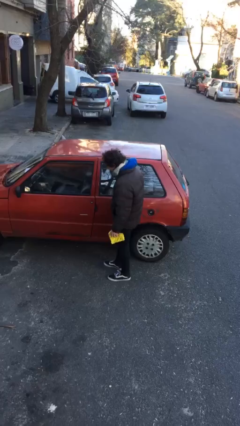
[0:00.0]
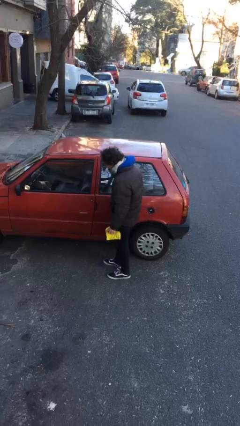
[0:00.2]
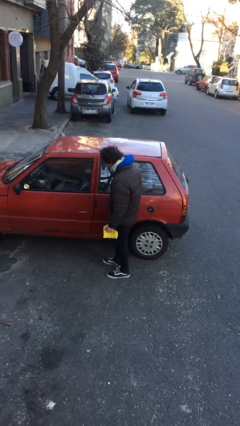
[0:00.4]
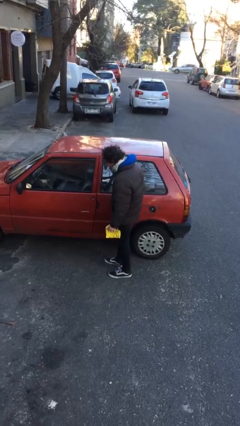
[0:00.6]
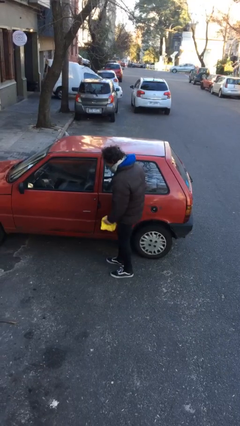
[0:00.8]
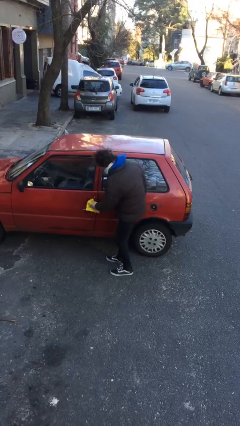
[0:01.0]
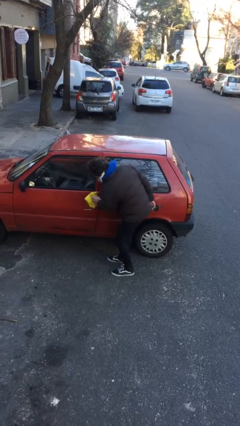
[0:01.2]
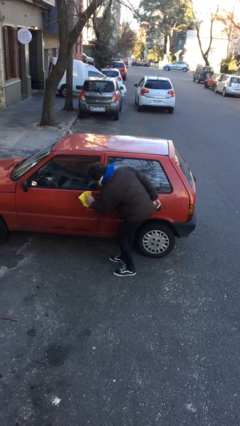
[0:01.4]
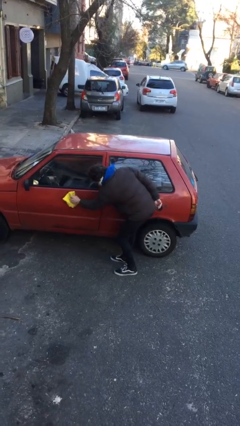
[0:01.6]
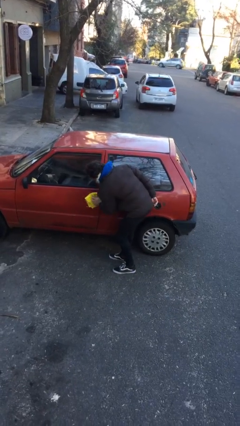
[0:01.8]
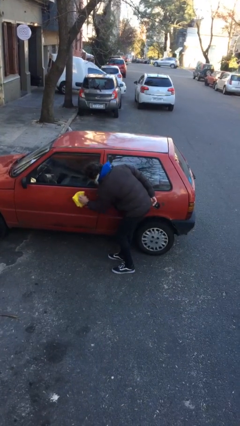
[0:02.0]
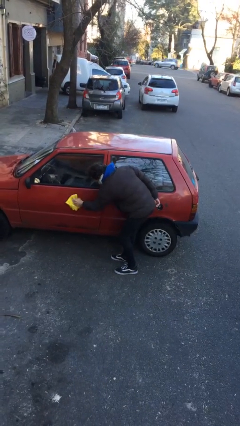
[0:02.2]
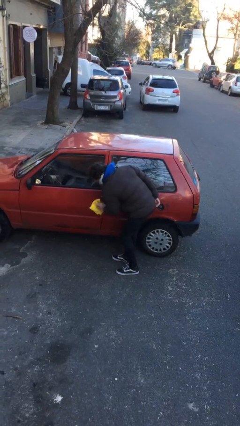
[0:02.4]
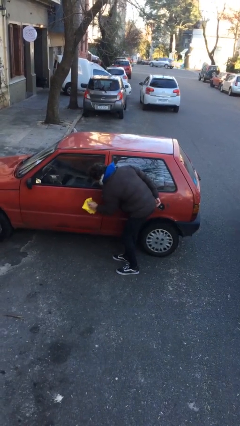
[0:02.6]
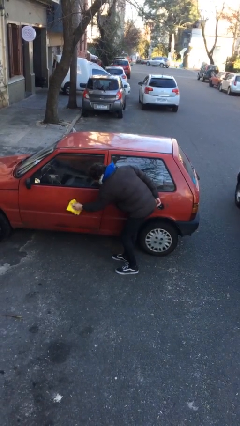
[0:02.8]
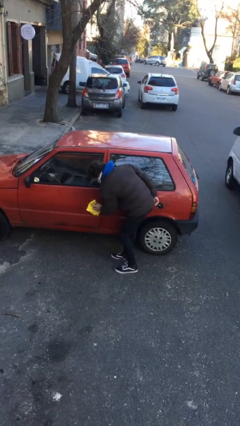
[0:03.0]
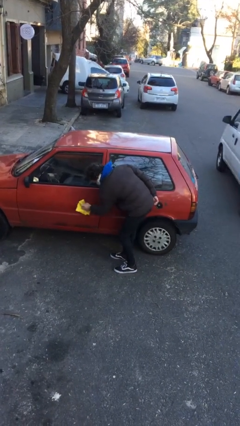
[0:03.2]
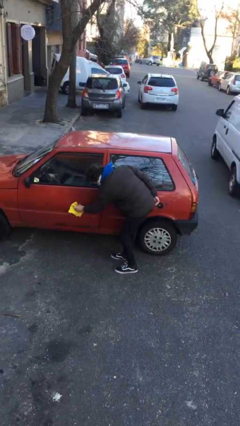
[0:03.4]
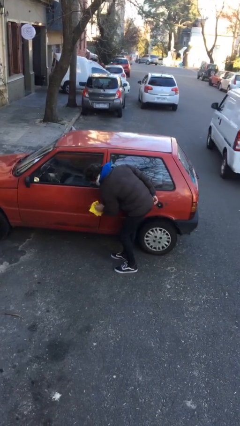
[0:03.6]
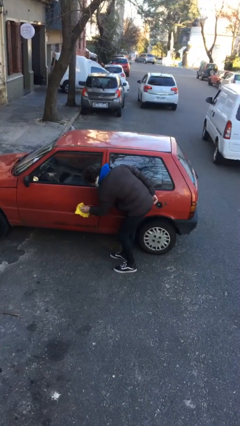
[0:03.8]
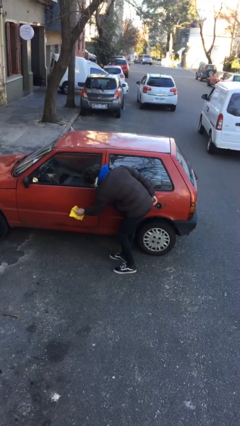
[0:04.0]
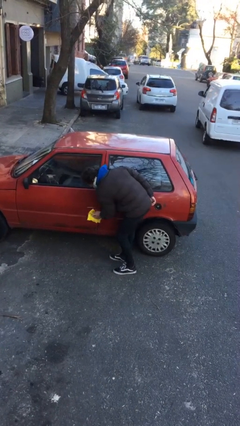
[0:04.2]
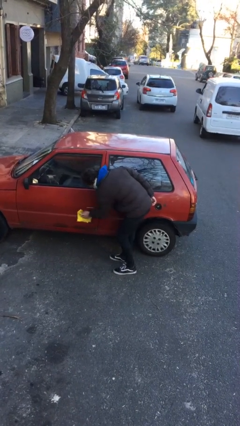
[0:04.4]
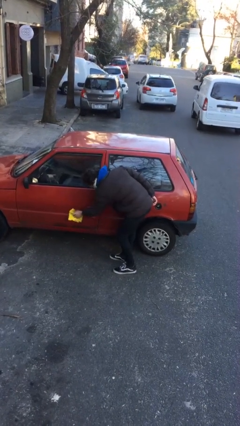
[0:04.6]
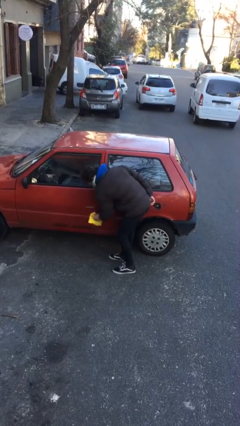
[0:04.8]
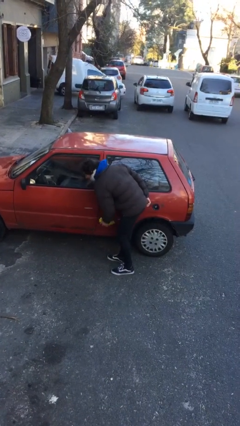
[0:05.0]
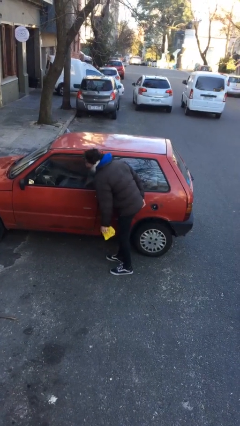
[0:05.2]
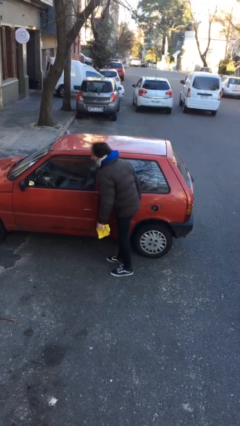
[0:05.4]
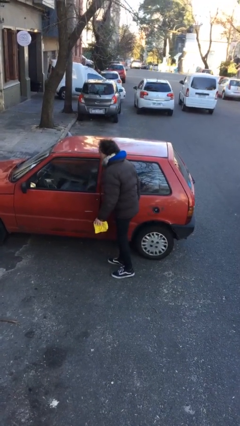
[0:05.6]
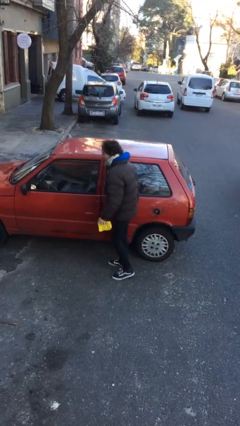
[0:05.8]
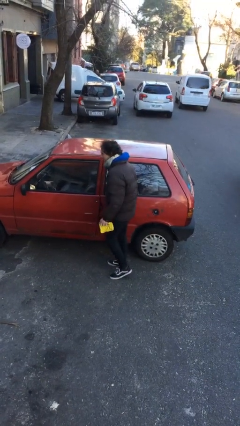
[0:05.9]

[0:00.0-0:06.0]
person polishes car with rag

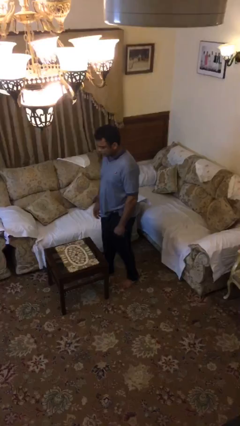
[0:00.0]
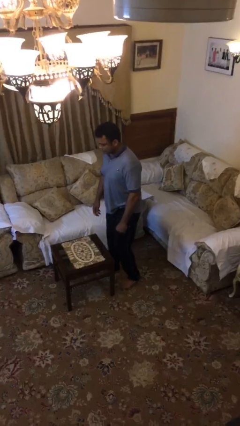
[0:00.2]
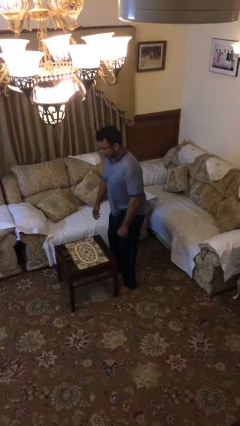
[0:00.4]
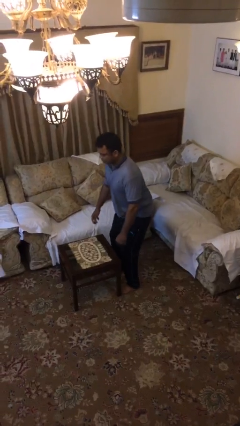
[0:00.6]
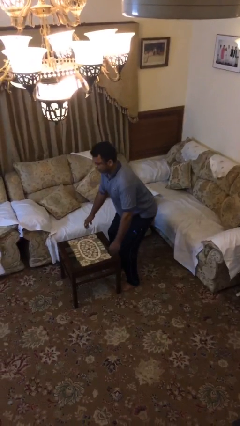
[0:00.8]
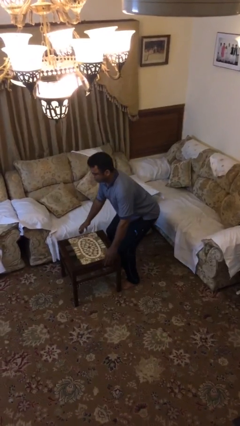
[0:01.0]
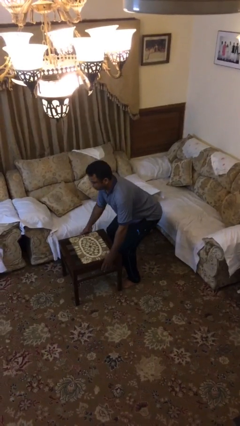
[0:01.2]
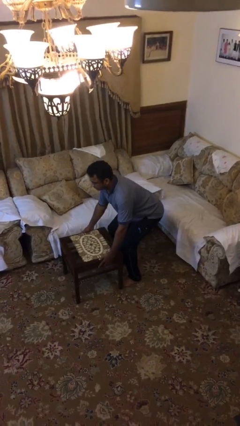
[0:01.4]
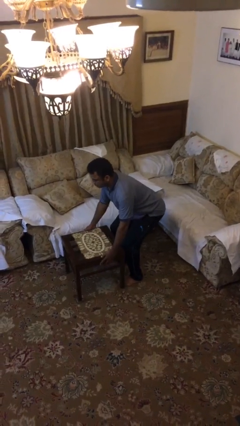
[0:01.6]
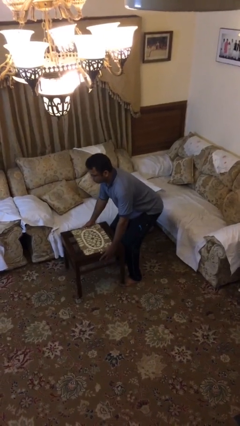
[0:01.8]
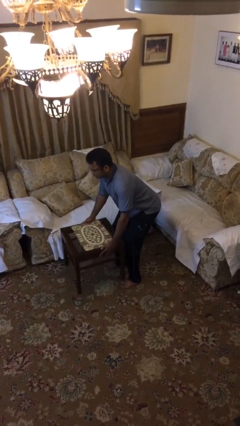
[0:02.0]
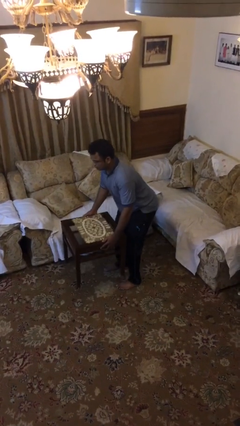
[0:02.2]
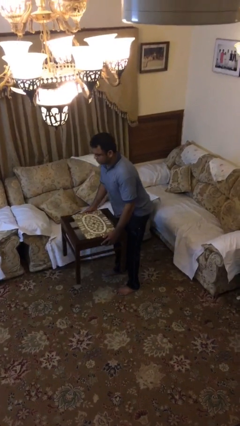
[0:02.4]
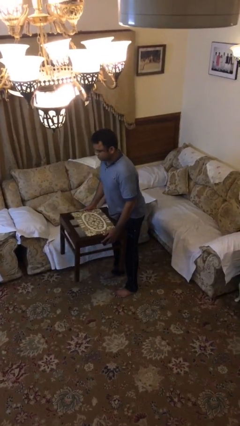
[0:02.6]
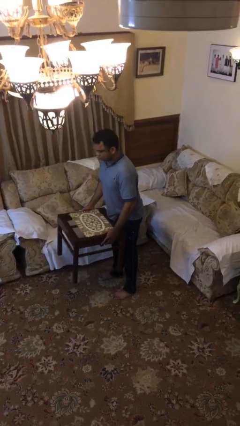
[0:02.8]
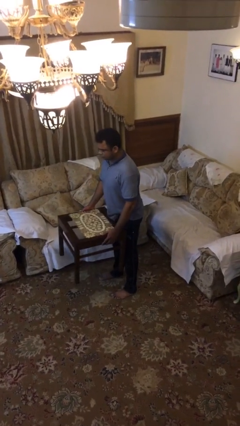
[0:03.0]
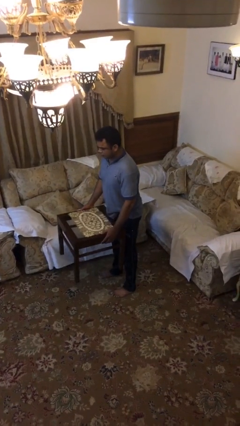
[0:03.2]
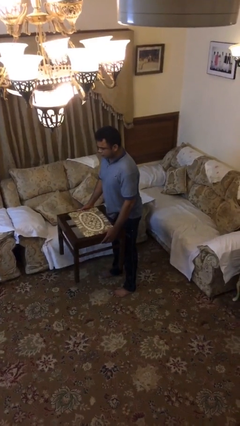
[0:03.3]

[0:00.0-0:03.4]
person picks up object from floor

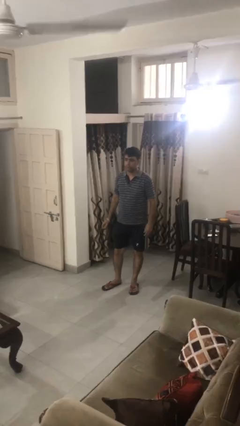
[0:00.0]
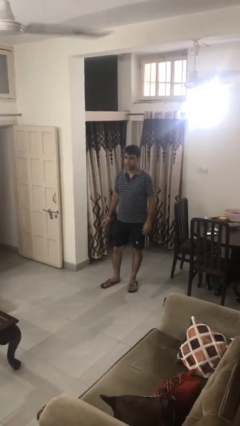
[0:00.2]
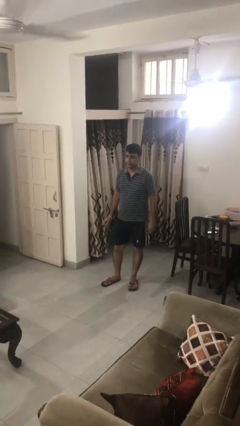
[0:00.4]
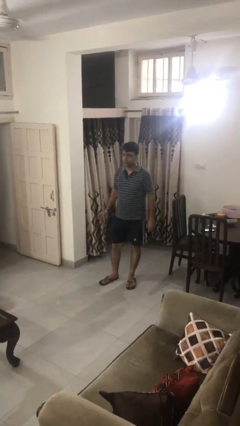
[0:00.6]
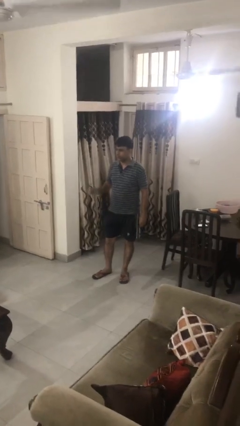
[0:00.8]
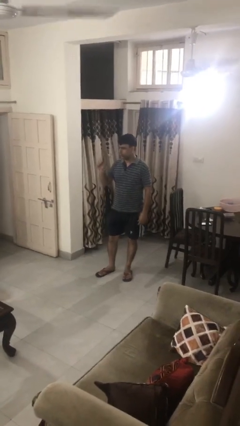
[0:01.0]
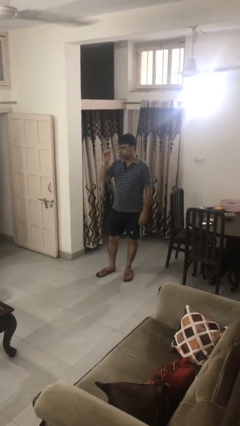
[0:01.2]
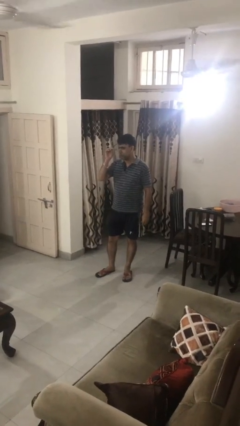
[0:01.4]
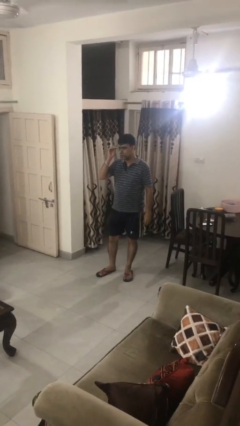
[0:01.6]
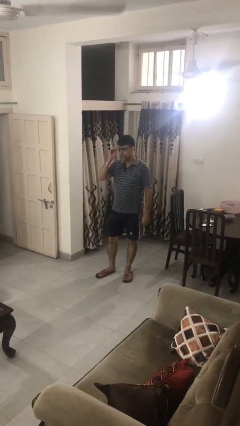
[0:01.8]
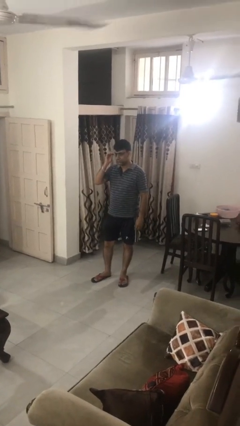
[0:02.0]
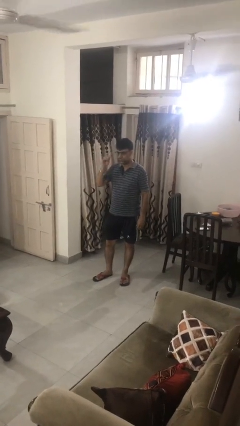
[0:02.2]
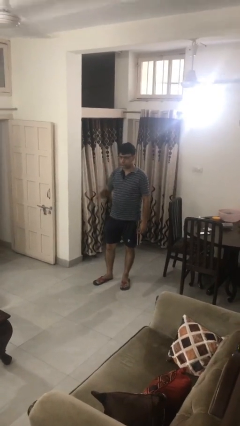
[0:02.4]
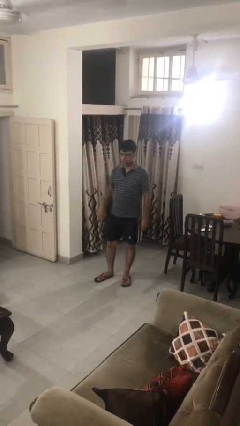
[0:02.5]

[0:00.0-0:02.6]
person puts on glasses

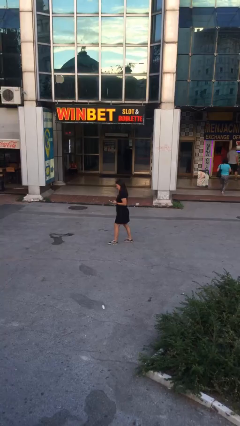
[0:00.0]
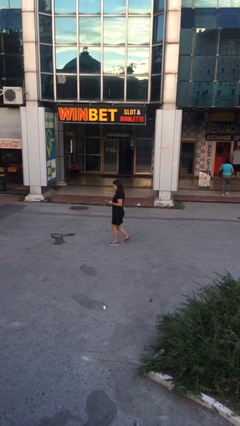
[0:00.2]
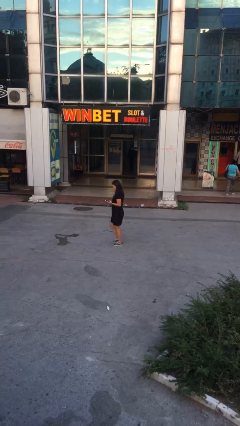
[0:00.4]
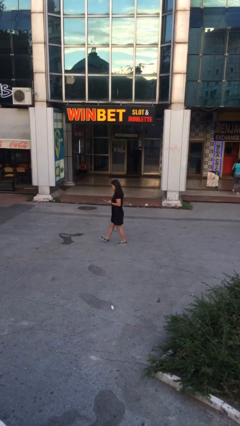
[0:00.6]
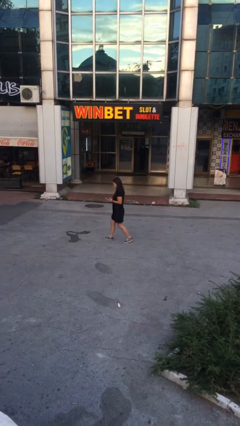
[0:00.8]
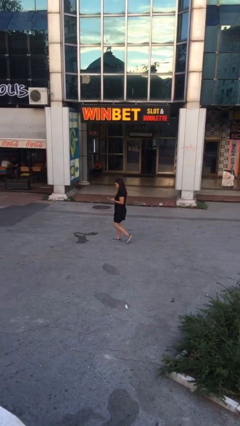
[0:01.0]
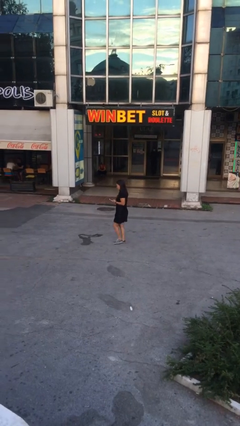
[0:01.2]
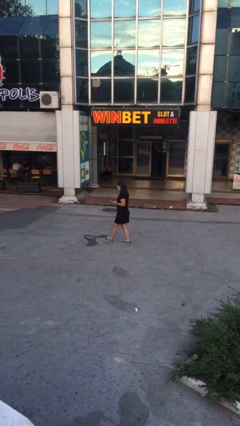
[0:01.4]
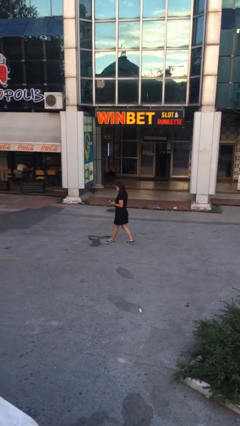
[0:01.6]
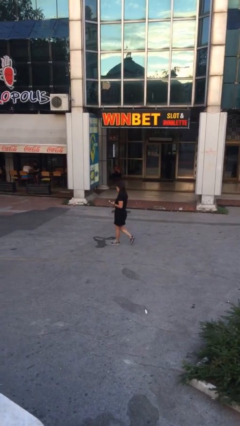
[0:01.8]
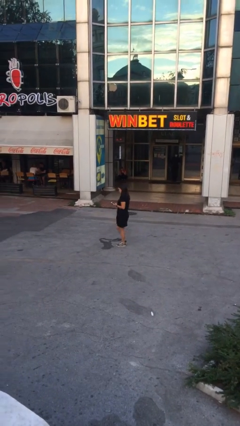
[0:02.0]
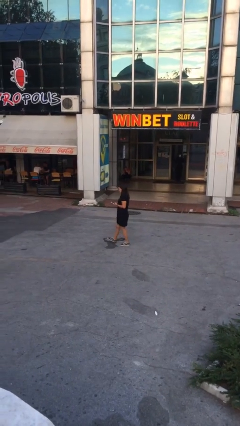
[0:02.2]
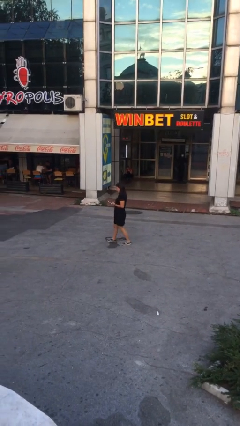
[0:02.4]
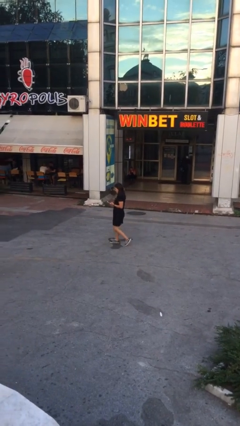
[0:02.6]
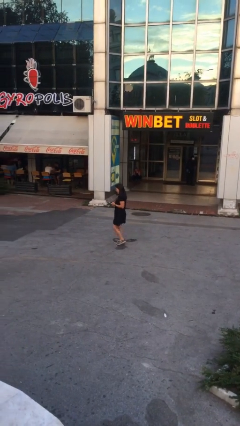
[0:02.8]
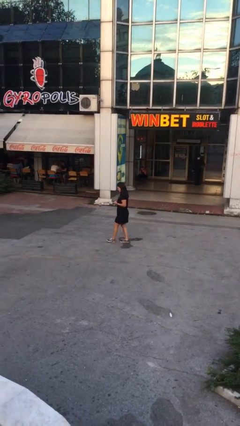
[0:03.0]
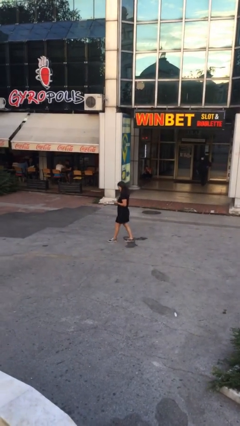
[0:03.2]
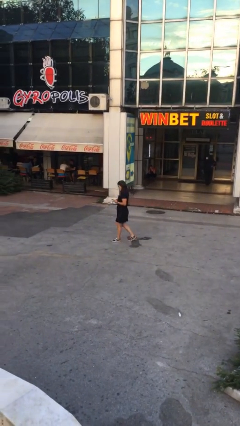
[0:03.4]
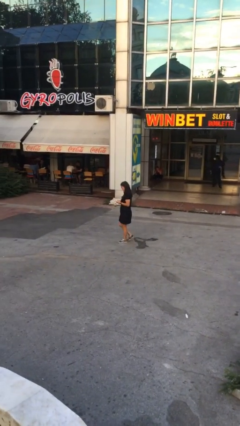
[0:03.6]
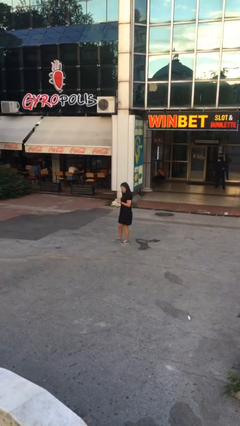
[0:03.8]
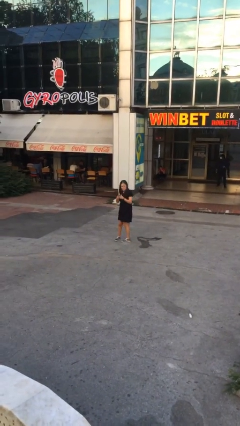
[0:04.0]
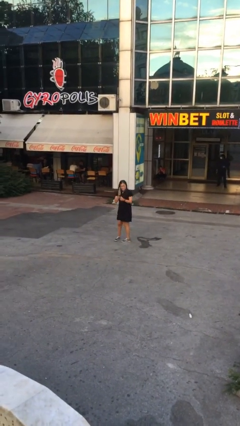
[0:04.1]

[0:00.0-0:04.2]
person texts on phone

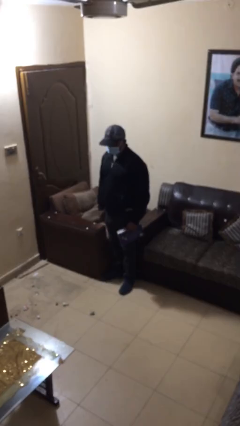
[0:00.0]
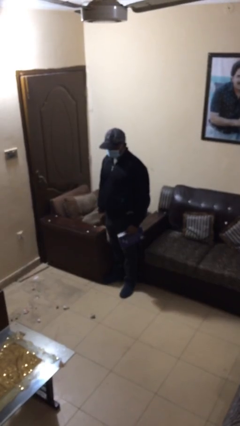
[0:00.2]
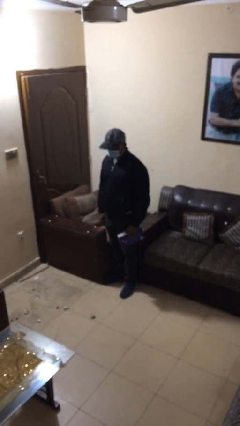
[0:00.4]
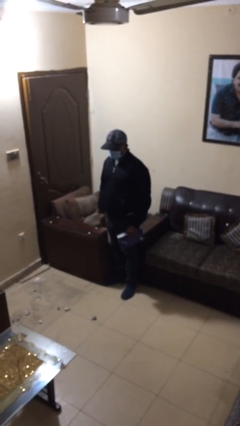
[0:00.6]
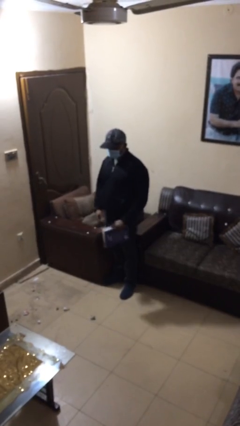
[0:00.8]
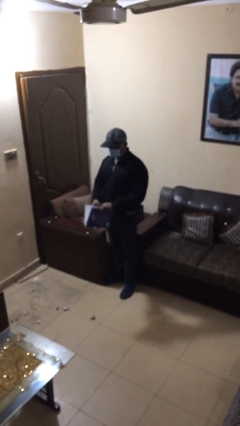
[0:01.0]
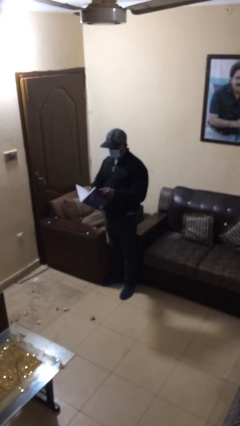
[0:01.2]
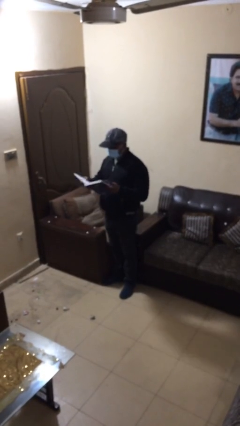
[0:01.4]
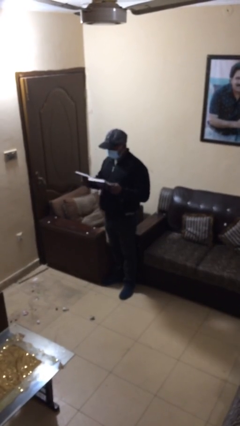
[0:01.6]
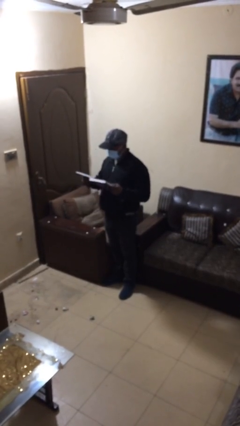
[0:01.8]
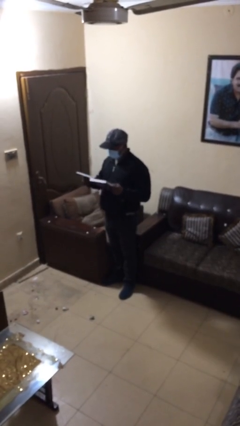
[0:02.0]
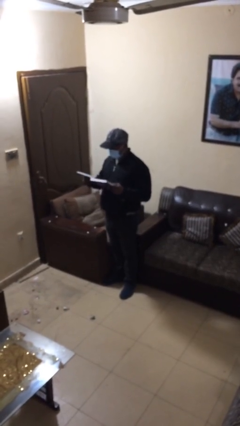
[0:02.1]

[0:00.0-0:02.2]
person reads document
